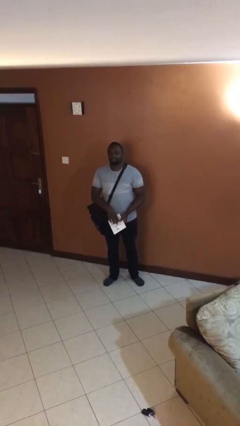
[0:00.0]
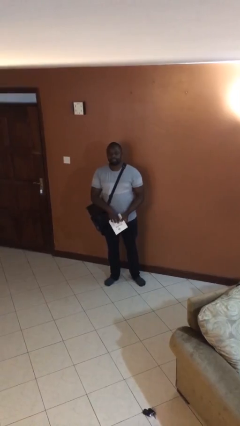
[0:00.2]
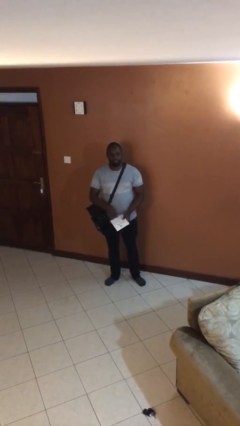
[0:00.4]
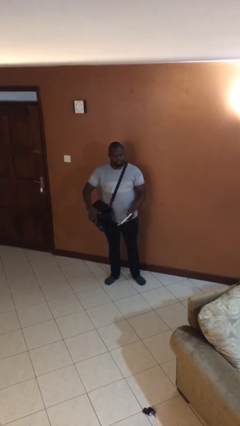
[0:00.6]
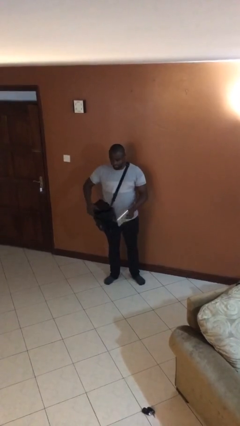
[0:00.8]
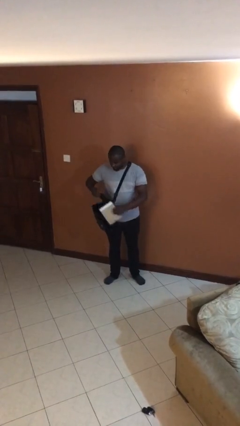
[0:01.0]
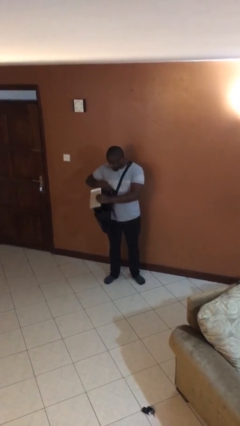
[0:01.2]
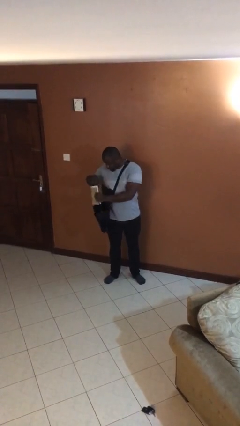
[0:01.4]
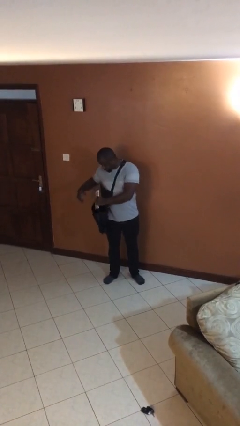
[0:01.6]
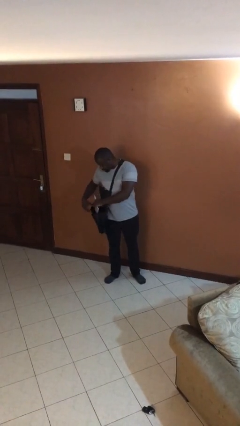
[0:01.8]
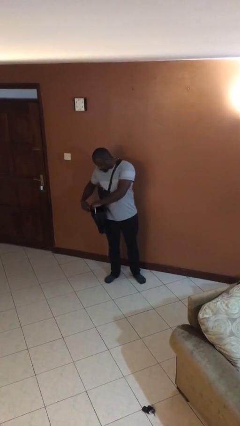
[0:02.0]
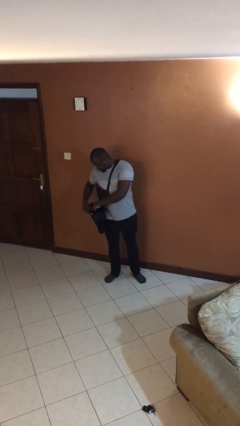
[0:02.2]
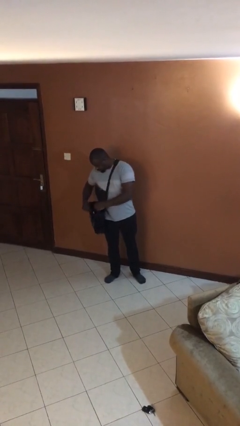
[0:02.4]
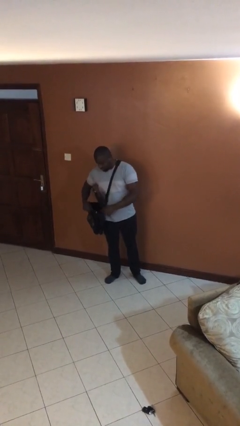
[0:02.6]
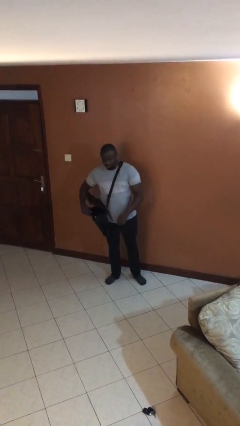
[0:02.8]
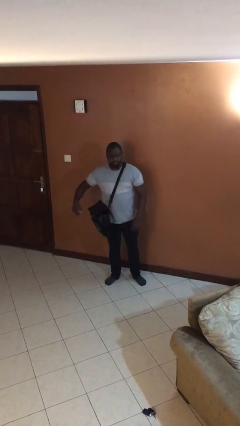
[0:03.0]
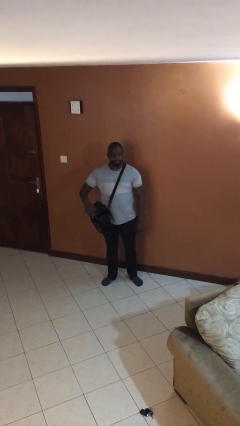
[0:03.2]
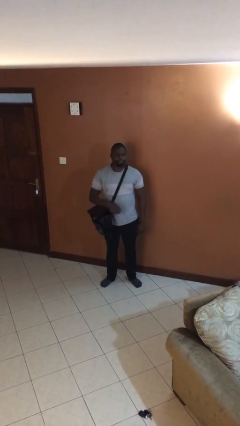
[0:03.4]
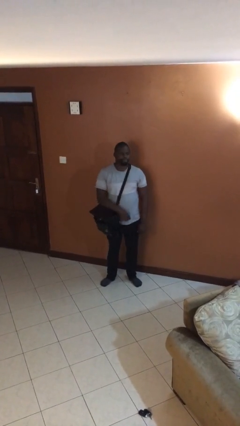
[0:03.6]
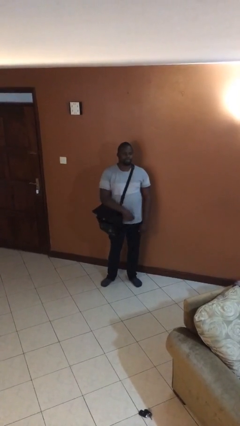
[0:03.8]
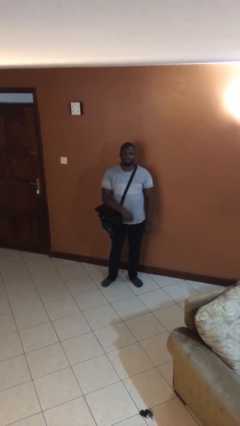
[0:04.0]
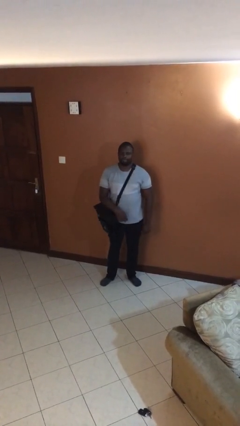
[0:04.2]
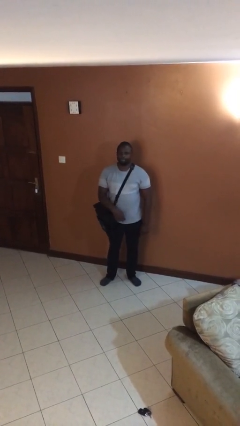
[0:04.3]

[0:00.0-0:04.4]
person puts object into purse

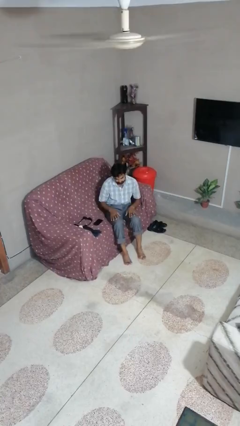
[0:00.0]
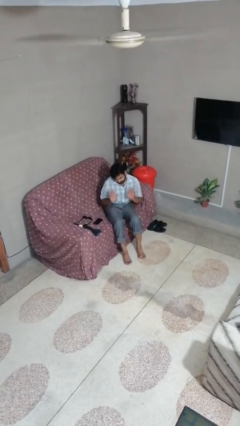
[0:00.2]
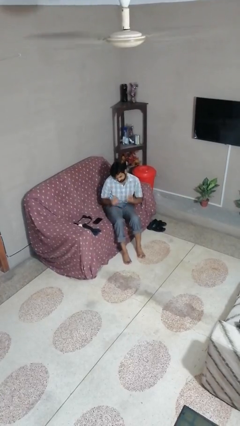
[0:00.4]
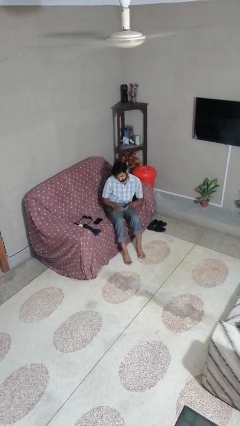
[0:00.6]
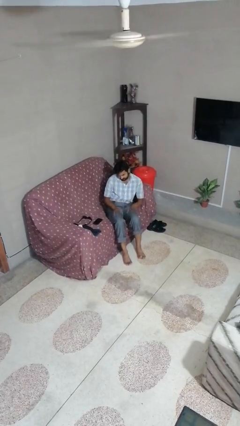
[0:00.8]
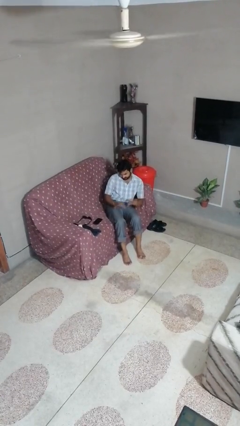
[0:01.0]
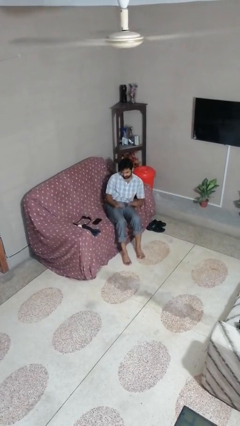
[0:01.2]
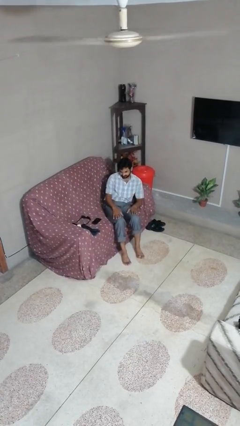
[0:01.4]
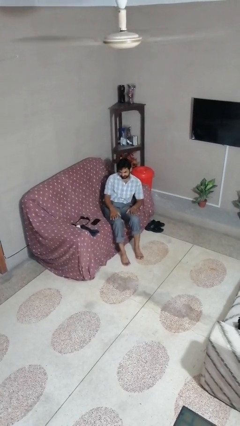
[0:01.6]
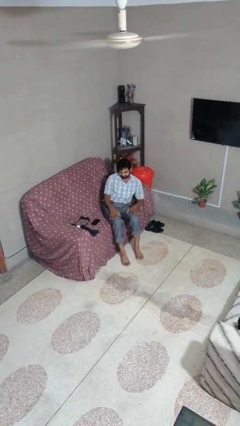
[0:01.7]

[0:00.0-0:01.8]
person slaps hands on thighs

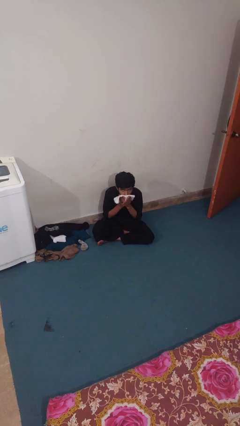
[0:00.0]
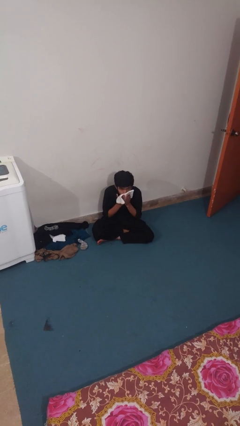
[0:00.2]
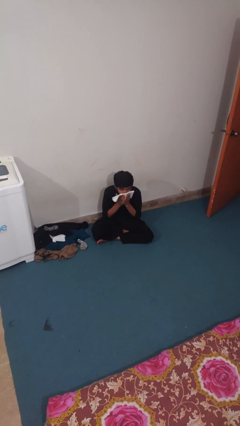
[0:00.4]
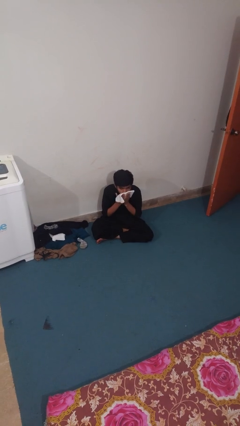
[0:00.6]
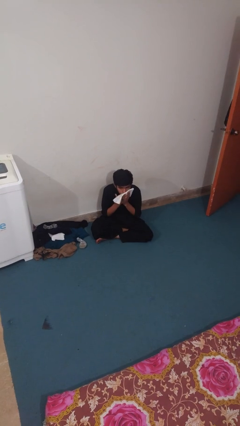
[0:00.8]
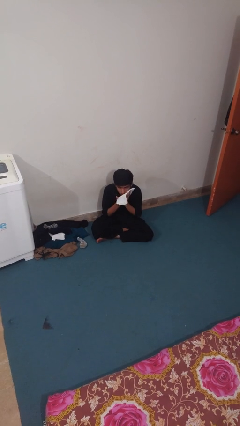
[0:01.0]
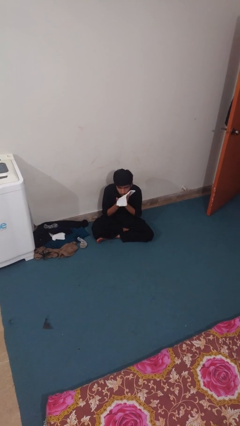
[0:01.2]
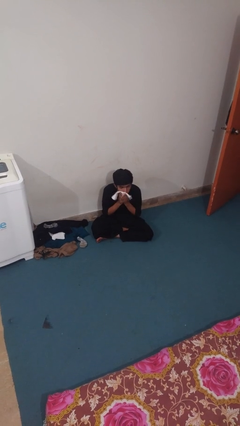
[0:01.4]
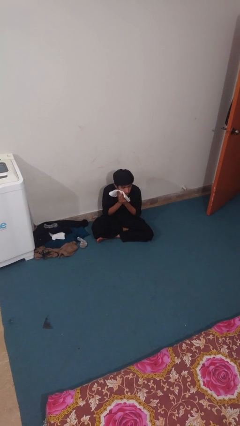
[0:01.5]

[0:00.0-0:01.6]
person wipes mouth with napkin

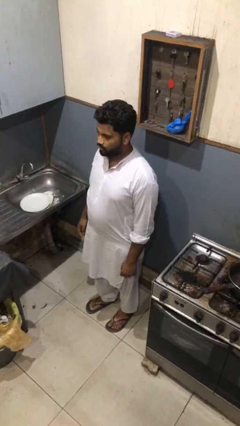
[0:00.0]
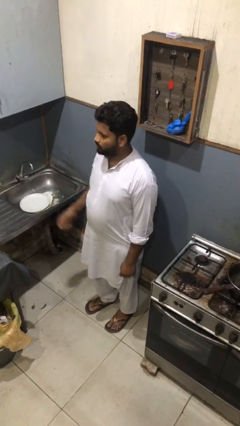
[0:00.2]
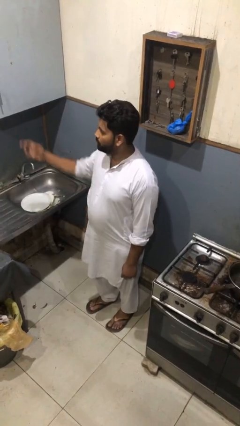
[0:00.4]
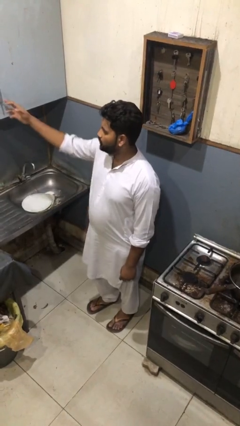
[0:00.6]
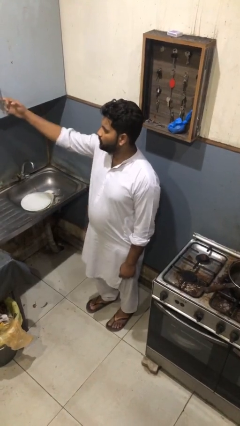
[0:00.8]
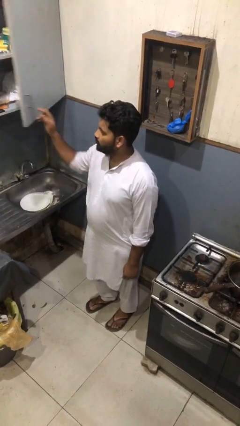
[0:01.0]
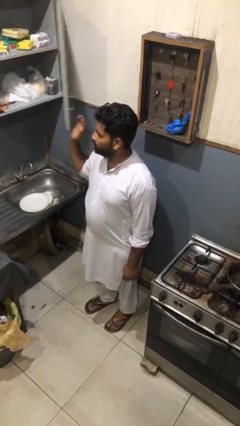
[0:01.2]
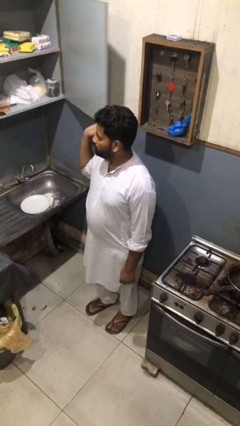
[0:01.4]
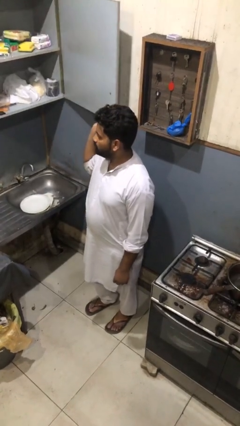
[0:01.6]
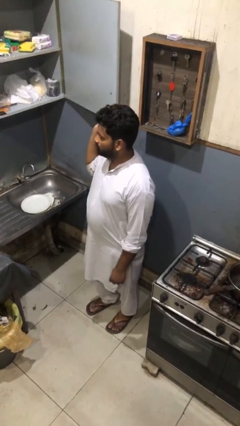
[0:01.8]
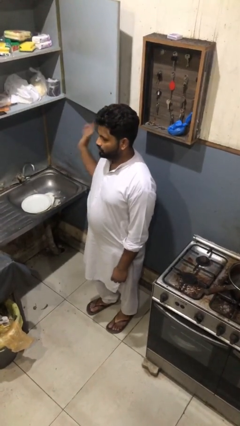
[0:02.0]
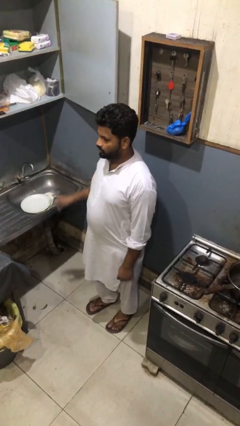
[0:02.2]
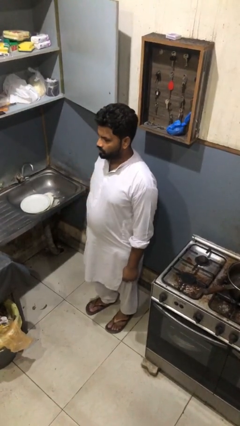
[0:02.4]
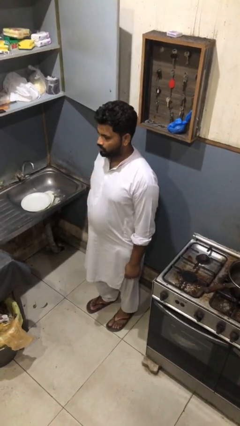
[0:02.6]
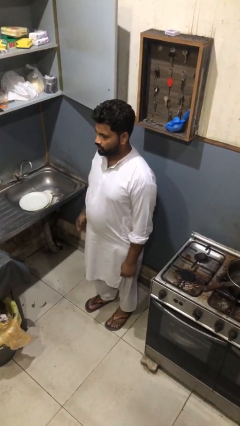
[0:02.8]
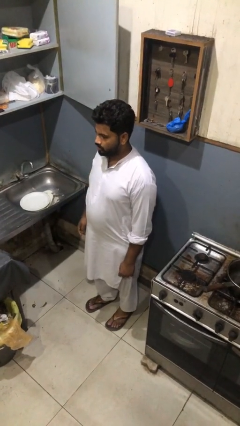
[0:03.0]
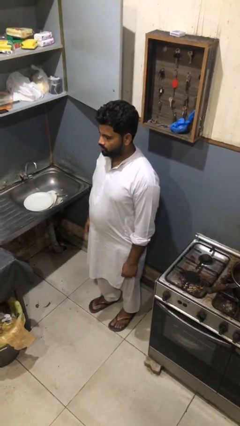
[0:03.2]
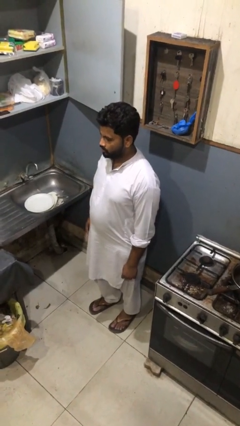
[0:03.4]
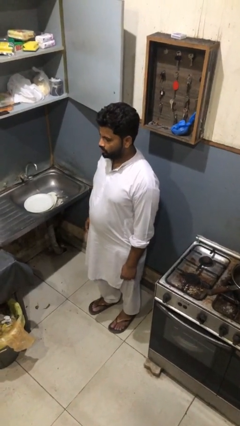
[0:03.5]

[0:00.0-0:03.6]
person opens cabinet

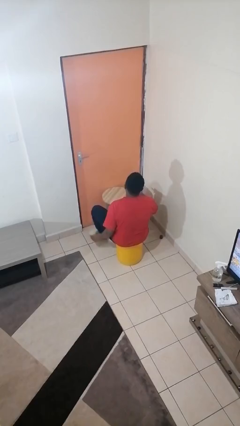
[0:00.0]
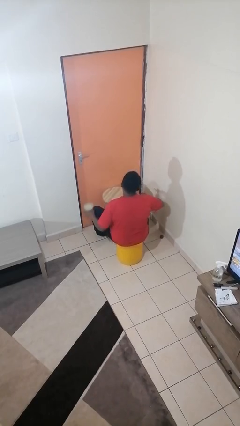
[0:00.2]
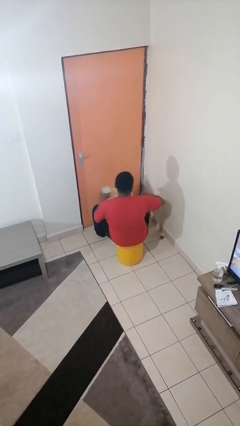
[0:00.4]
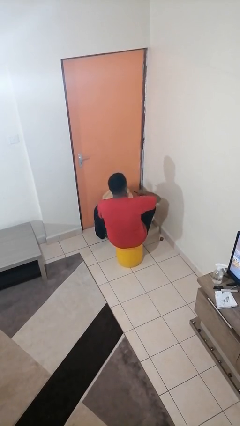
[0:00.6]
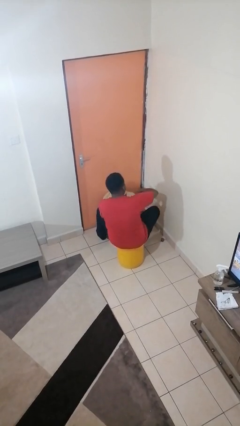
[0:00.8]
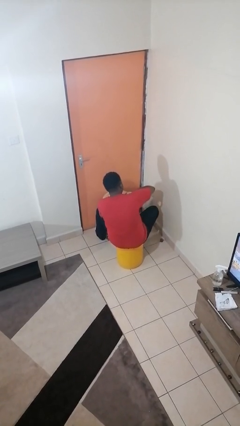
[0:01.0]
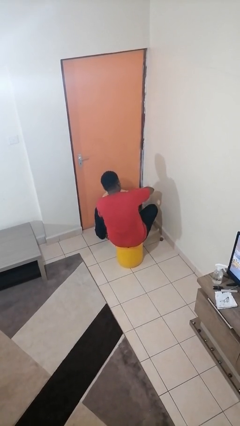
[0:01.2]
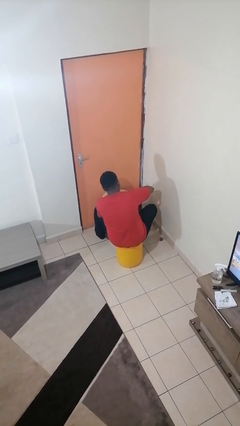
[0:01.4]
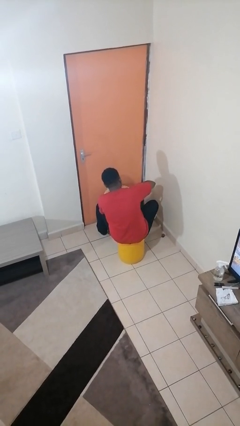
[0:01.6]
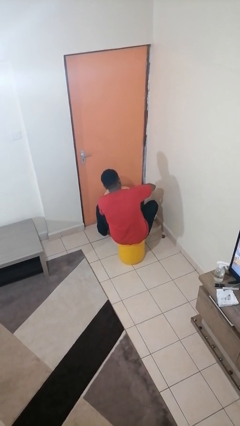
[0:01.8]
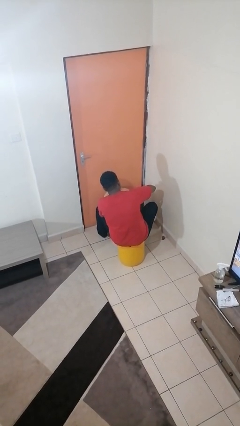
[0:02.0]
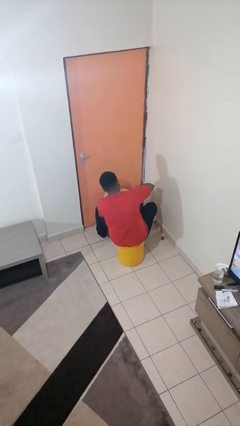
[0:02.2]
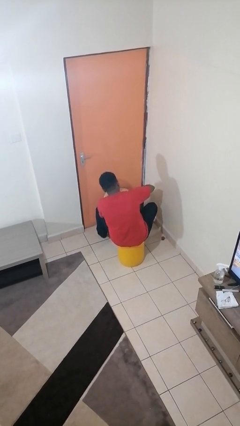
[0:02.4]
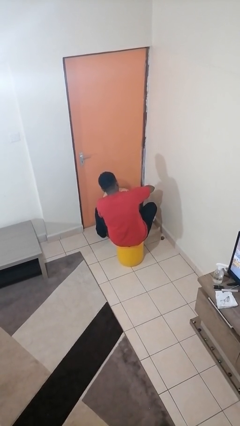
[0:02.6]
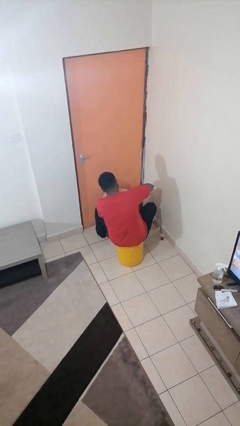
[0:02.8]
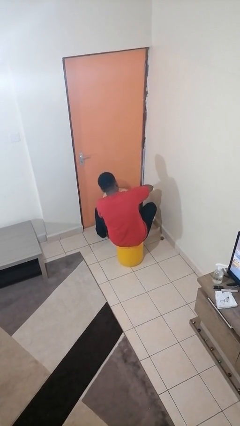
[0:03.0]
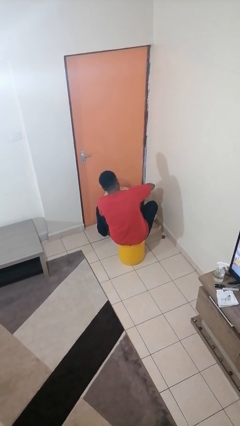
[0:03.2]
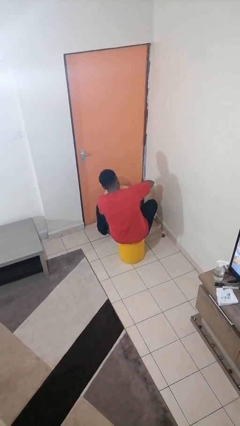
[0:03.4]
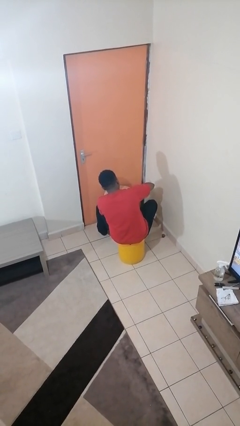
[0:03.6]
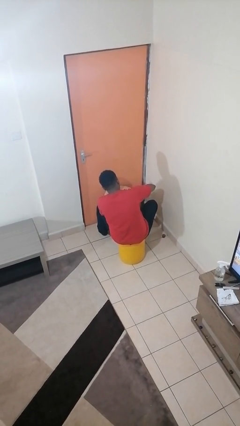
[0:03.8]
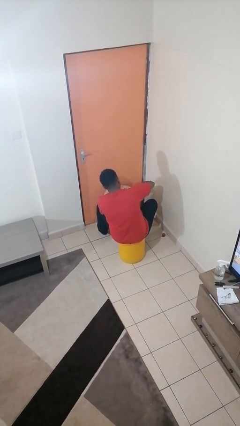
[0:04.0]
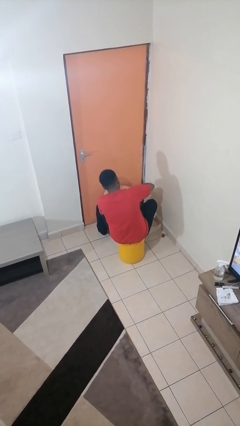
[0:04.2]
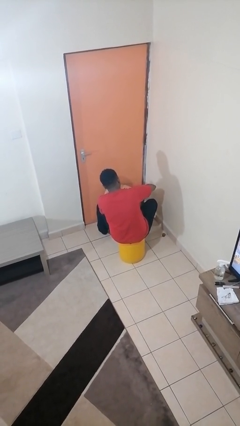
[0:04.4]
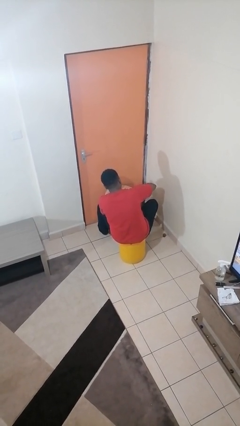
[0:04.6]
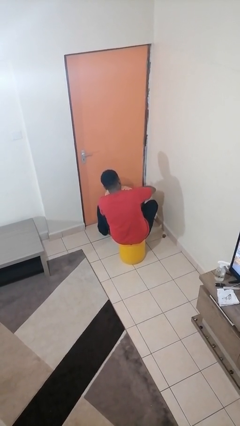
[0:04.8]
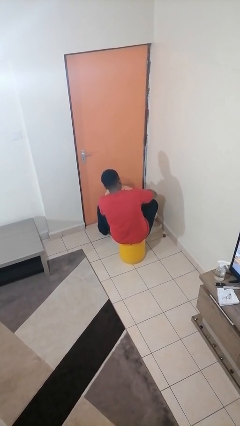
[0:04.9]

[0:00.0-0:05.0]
person opens can with can opener

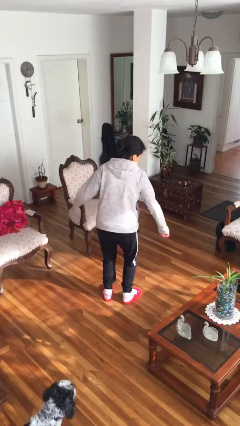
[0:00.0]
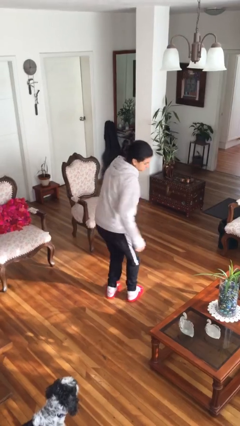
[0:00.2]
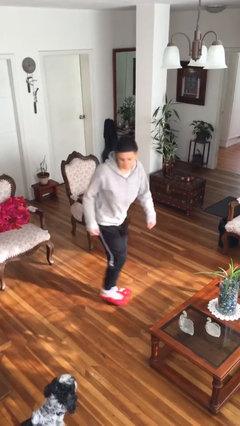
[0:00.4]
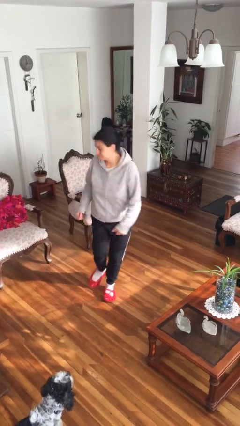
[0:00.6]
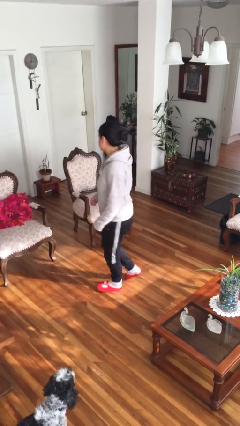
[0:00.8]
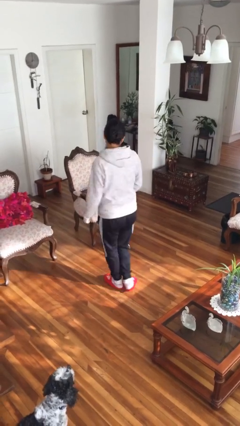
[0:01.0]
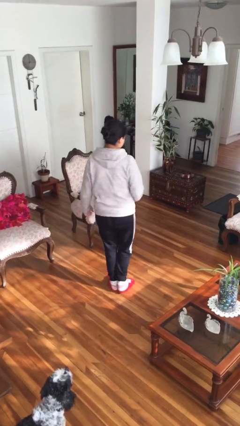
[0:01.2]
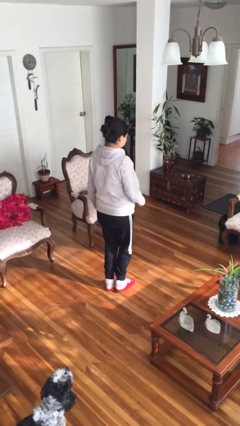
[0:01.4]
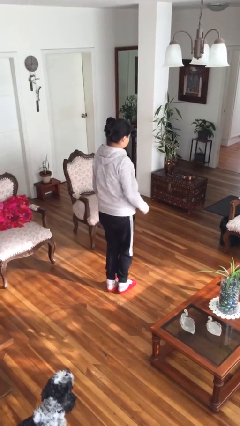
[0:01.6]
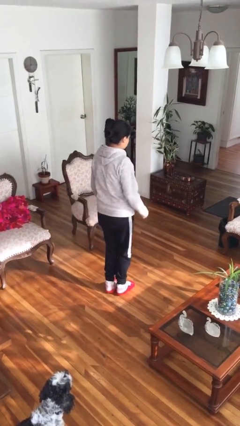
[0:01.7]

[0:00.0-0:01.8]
person twirls
